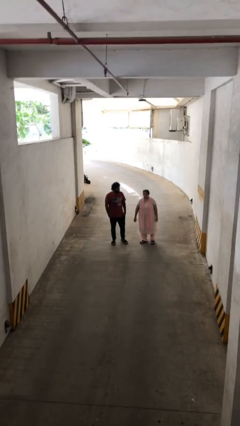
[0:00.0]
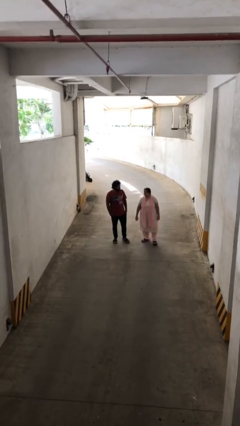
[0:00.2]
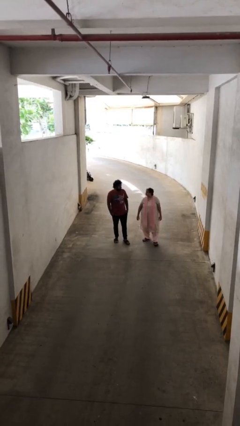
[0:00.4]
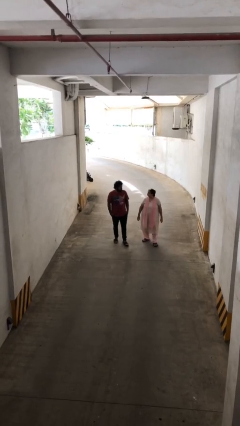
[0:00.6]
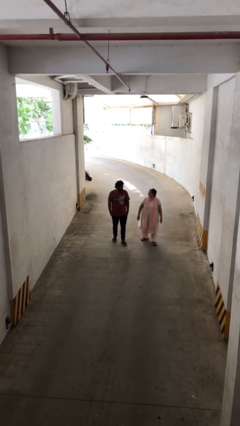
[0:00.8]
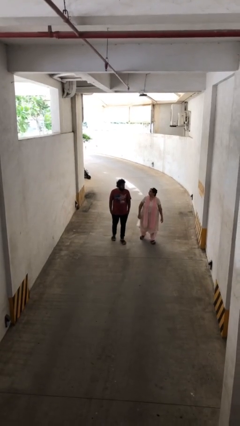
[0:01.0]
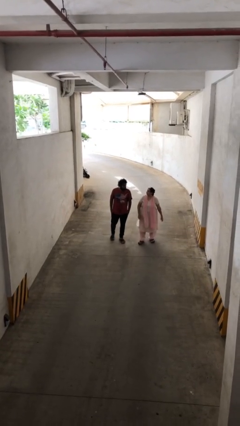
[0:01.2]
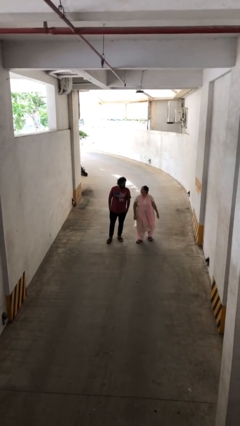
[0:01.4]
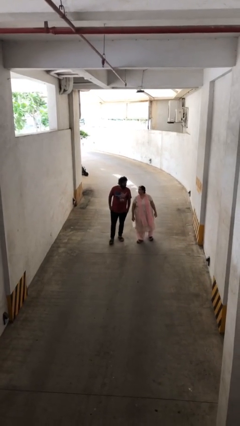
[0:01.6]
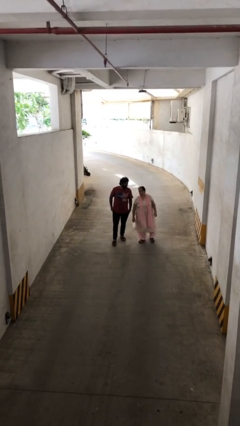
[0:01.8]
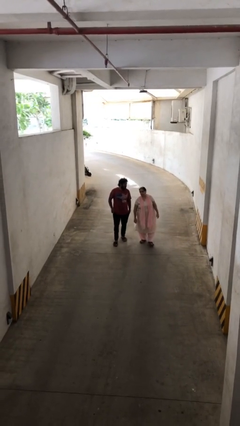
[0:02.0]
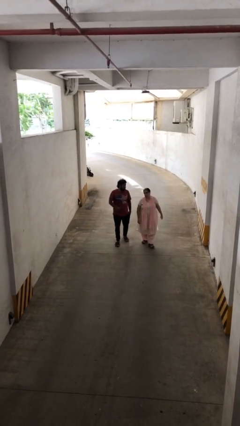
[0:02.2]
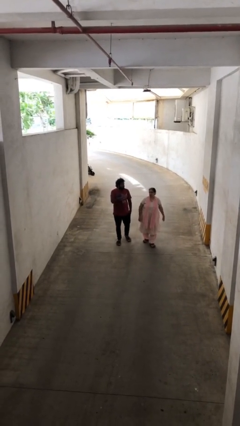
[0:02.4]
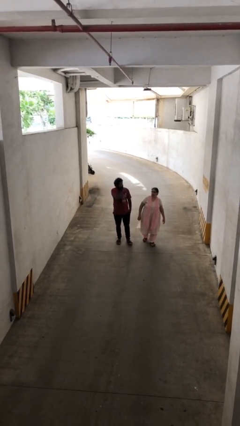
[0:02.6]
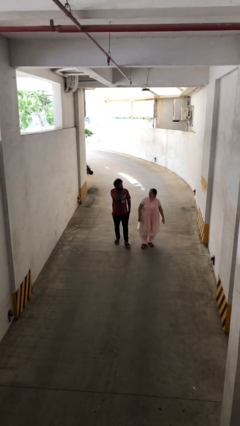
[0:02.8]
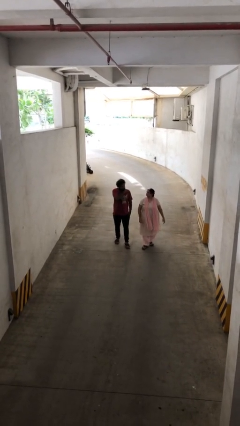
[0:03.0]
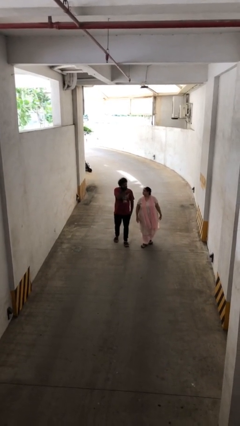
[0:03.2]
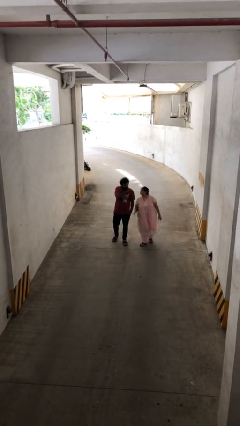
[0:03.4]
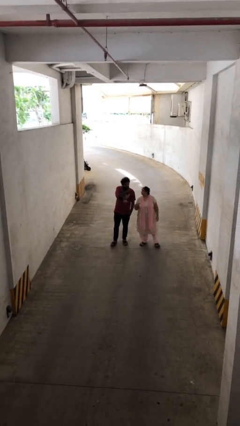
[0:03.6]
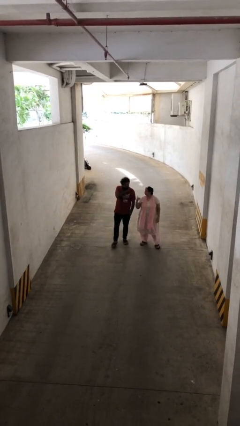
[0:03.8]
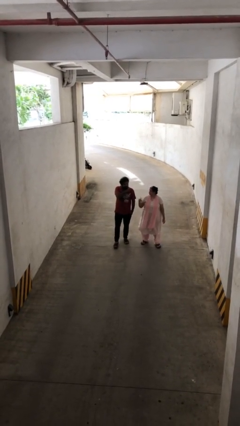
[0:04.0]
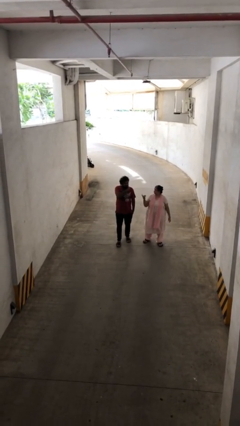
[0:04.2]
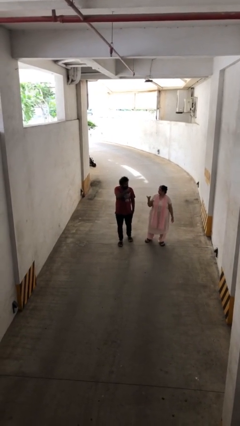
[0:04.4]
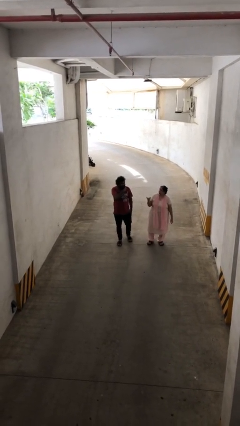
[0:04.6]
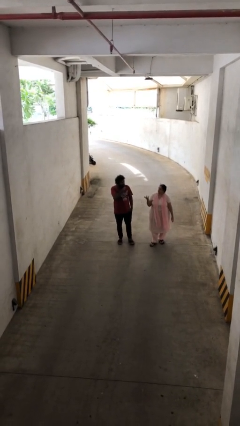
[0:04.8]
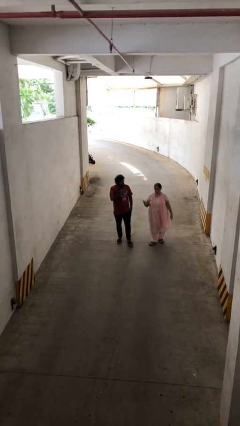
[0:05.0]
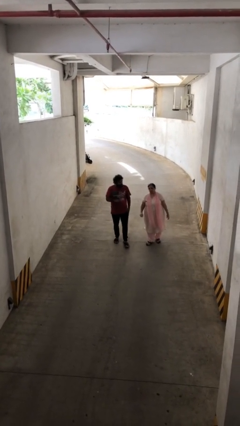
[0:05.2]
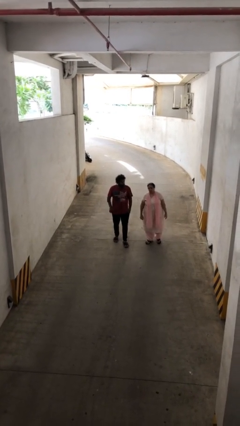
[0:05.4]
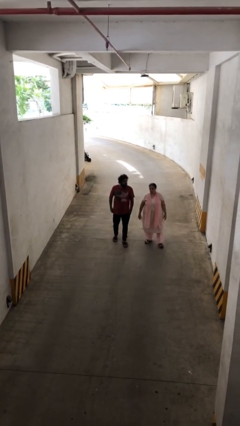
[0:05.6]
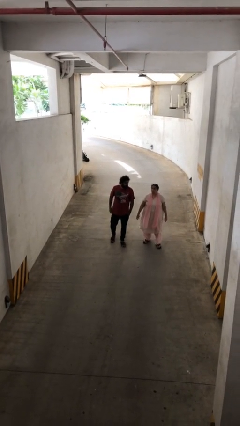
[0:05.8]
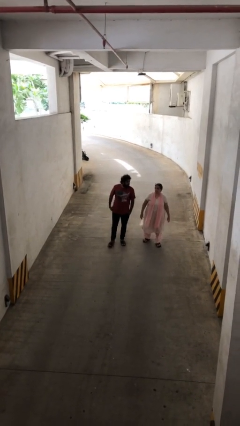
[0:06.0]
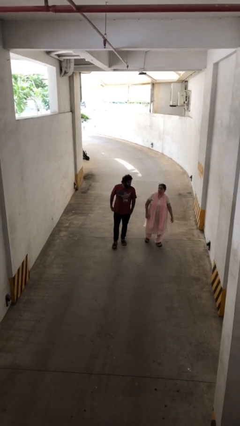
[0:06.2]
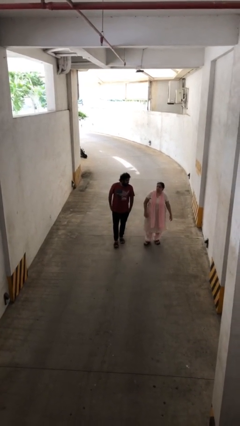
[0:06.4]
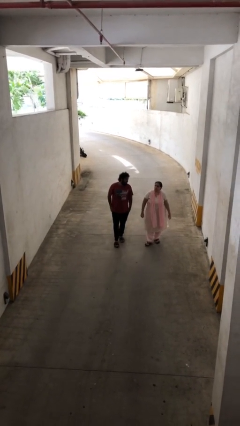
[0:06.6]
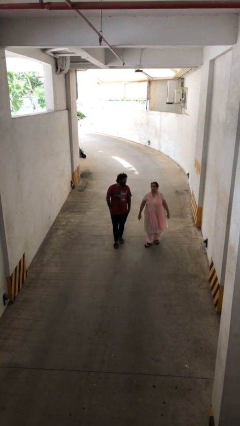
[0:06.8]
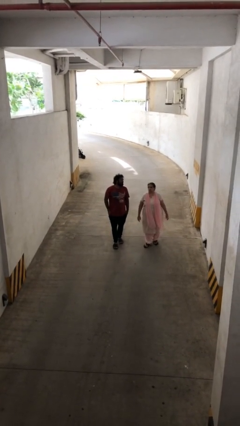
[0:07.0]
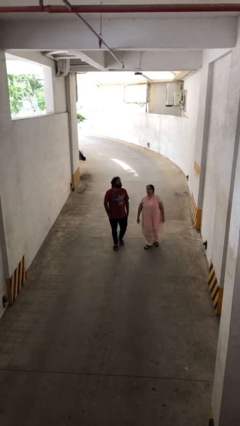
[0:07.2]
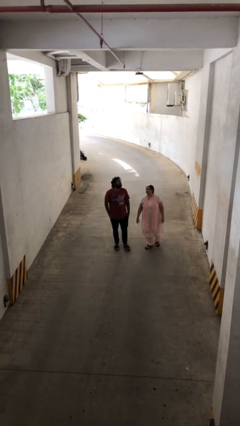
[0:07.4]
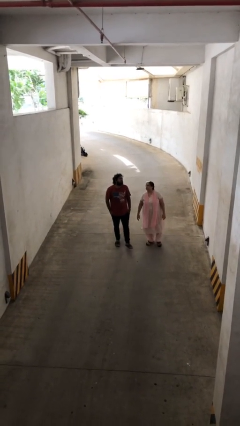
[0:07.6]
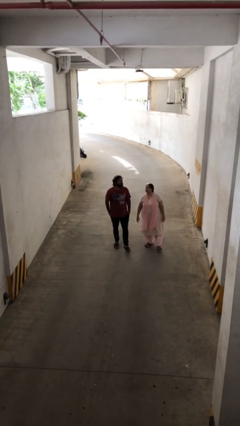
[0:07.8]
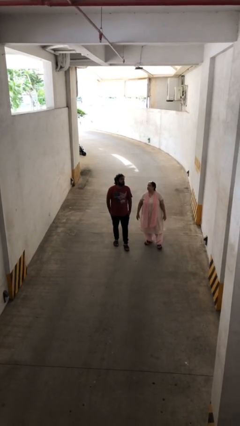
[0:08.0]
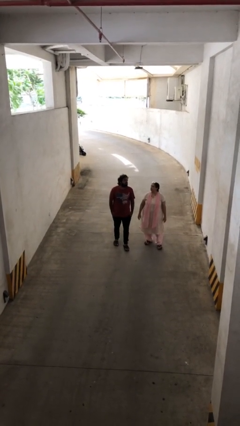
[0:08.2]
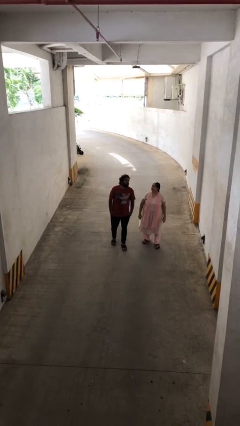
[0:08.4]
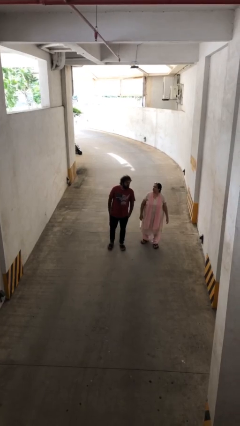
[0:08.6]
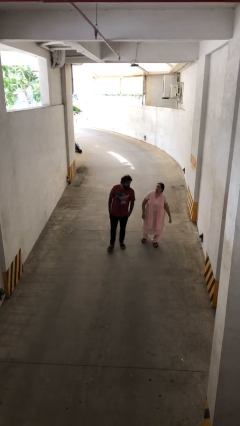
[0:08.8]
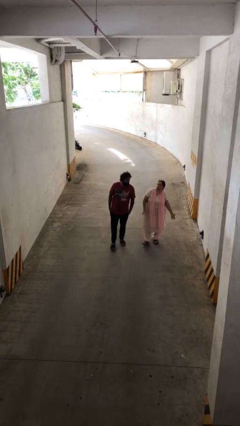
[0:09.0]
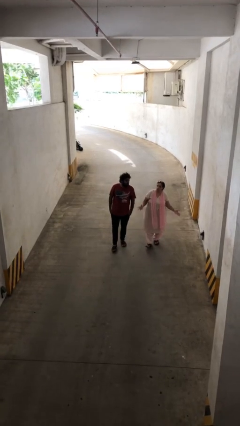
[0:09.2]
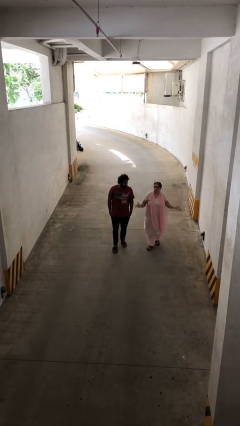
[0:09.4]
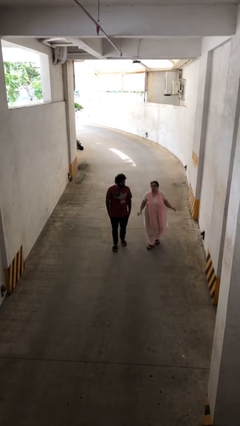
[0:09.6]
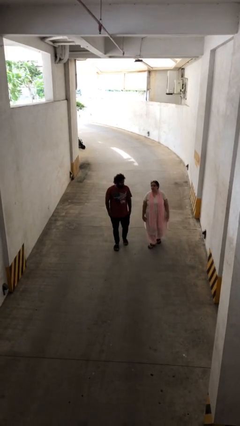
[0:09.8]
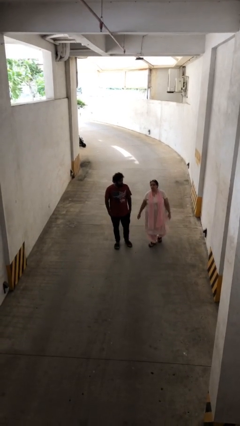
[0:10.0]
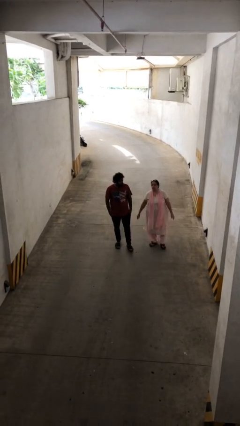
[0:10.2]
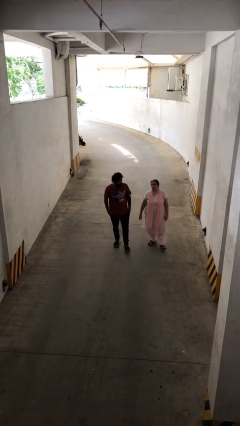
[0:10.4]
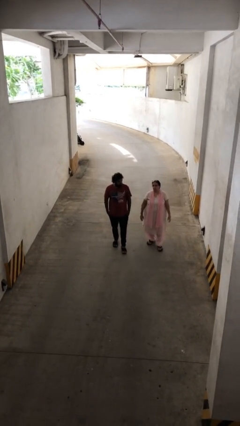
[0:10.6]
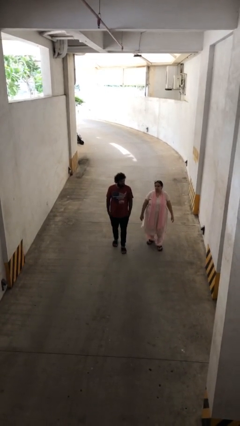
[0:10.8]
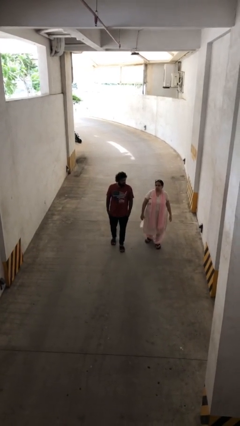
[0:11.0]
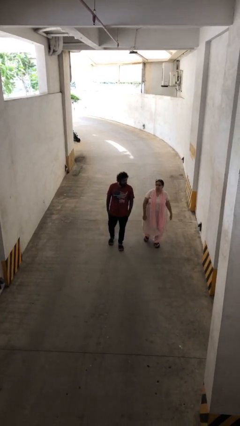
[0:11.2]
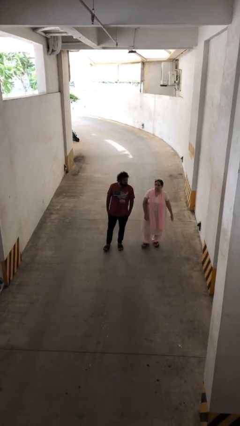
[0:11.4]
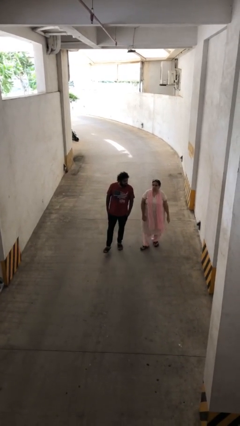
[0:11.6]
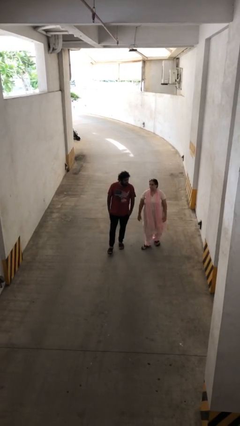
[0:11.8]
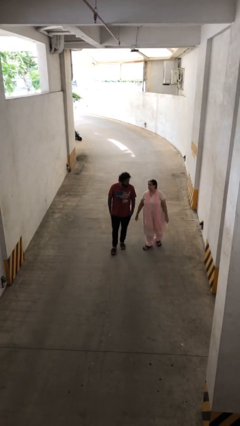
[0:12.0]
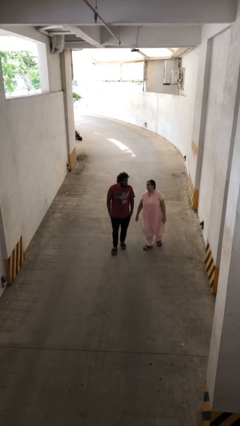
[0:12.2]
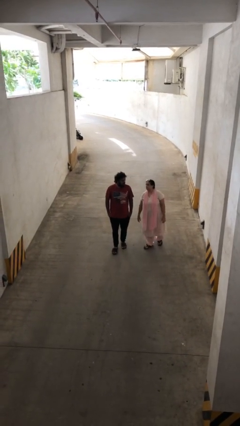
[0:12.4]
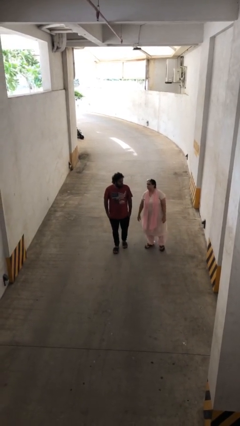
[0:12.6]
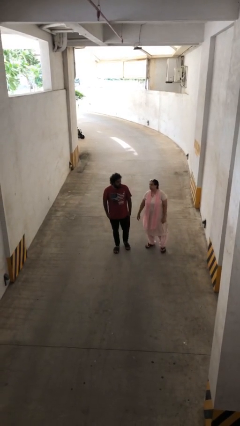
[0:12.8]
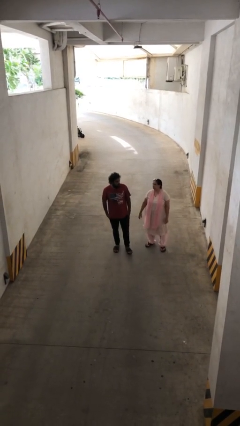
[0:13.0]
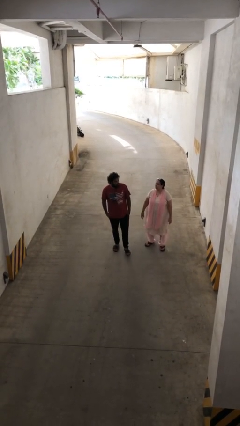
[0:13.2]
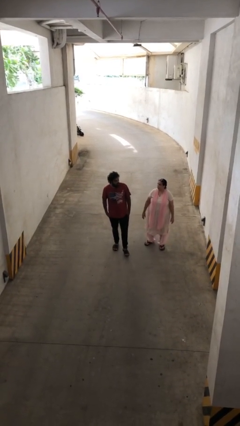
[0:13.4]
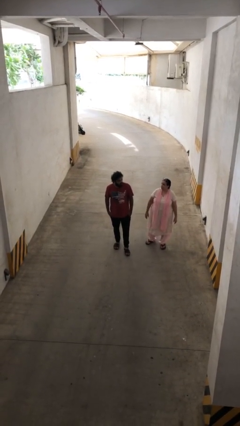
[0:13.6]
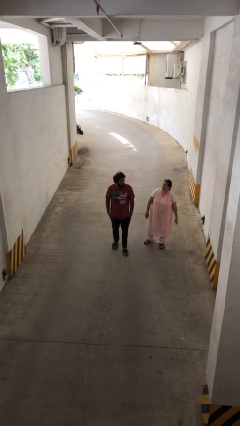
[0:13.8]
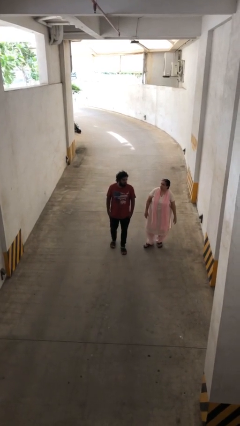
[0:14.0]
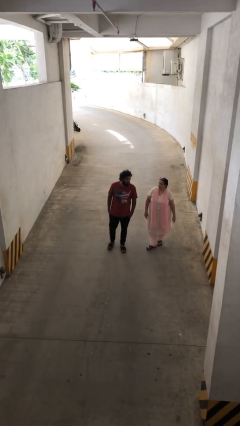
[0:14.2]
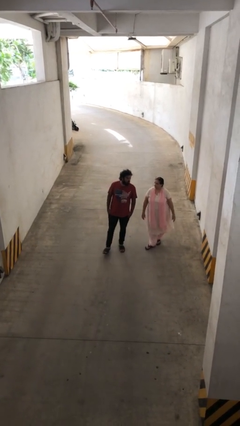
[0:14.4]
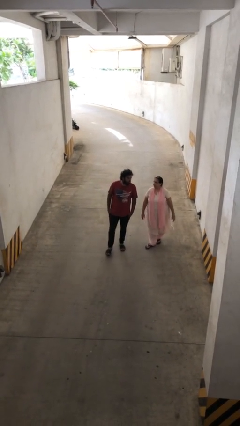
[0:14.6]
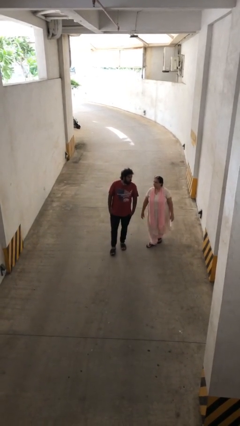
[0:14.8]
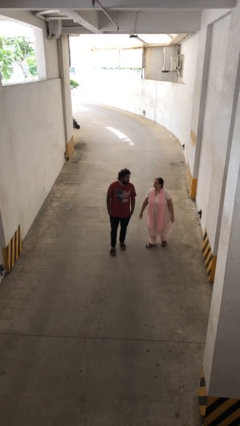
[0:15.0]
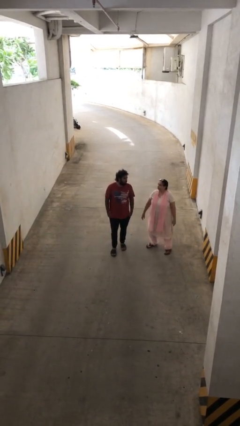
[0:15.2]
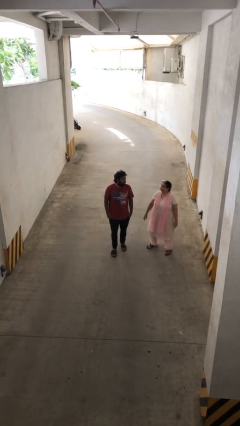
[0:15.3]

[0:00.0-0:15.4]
person talks to person

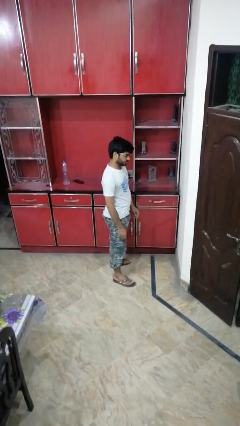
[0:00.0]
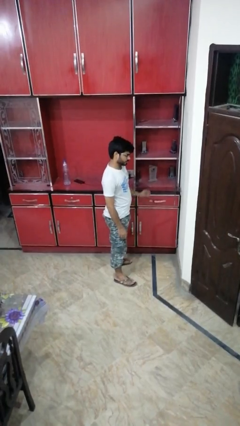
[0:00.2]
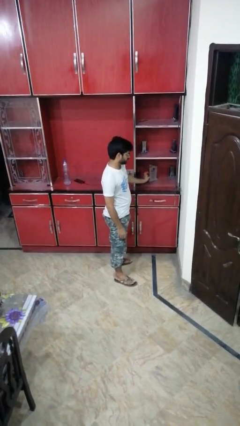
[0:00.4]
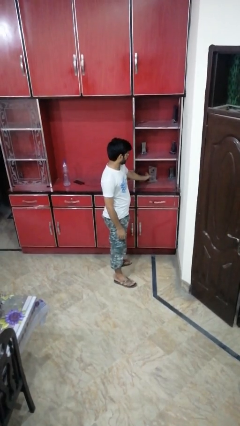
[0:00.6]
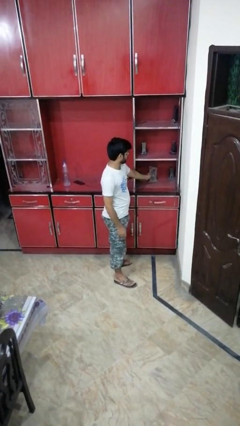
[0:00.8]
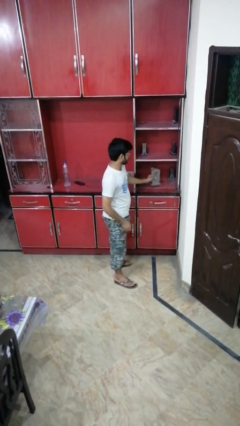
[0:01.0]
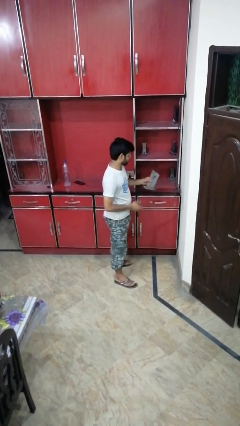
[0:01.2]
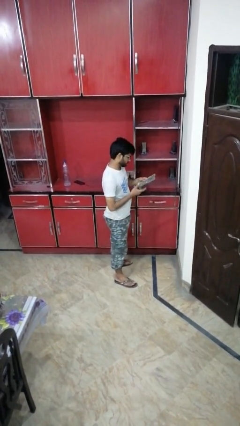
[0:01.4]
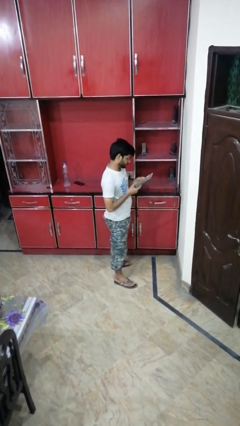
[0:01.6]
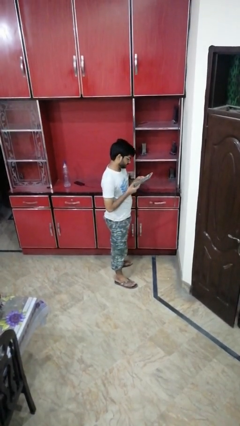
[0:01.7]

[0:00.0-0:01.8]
person picks up object from cabinet

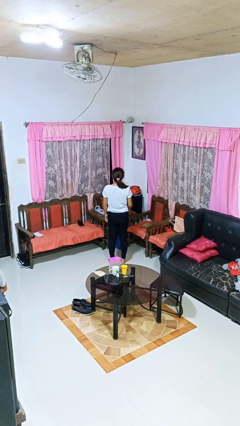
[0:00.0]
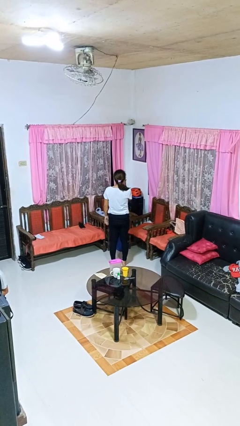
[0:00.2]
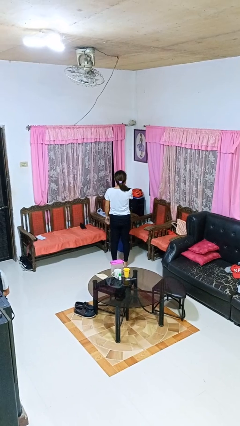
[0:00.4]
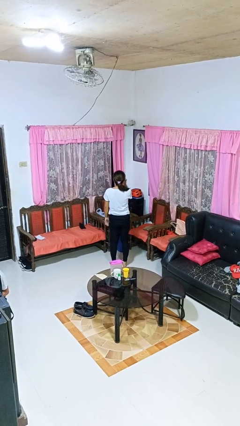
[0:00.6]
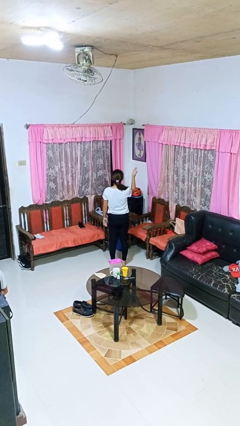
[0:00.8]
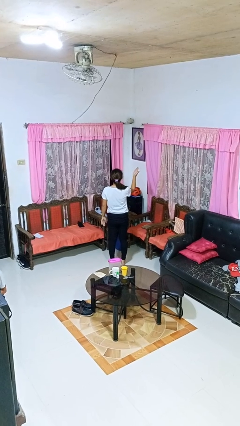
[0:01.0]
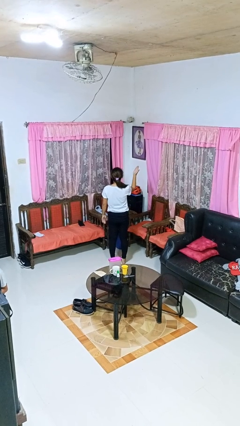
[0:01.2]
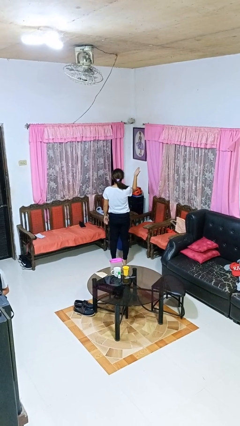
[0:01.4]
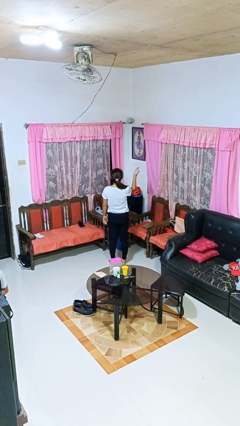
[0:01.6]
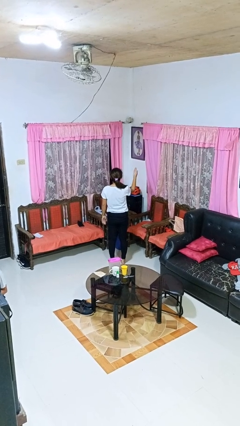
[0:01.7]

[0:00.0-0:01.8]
person gestures blow kiss
